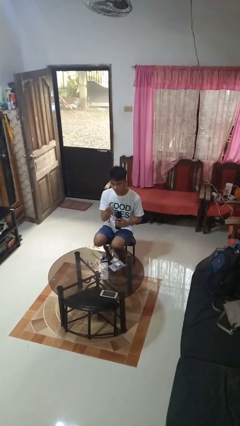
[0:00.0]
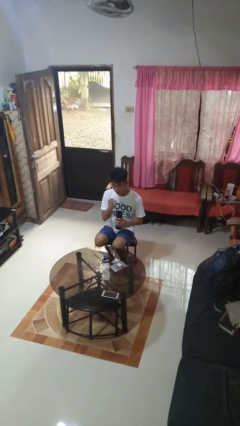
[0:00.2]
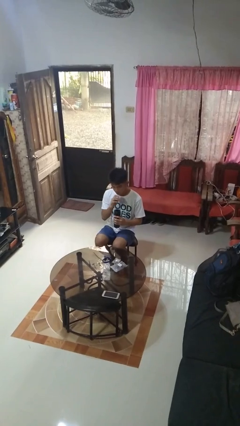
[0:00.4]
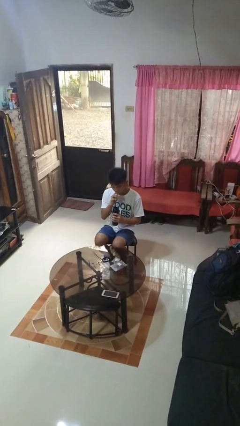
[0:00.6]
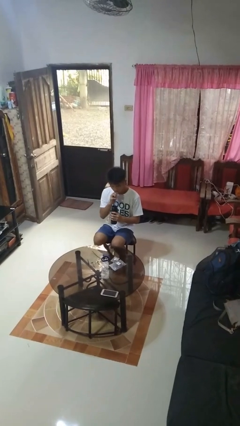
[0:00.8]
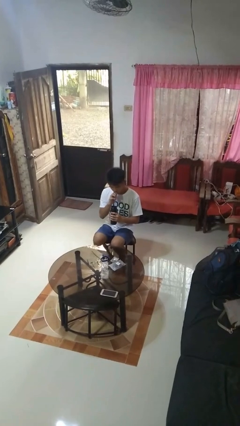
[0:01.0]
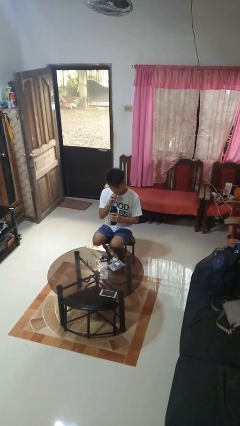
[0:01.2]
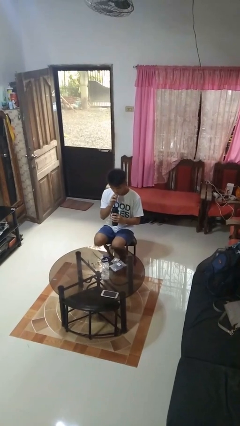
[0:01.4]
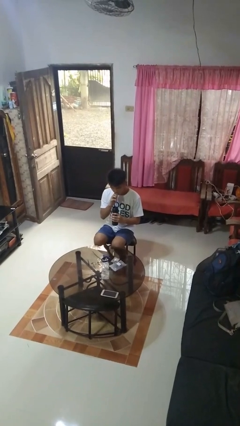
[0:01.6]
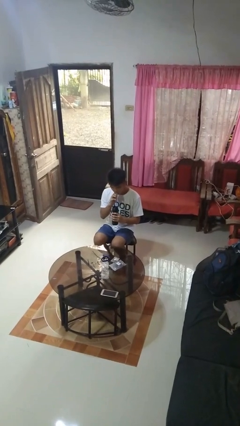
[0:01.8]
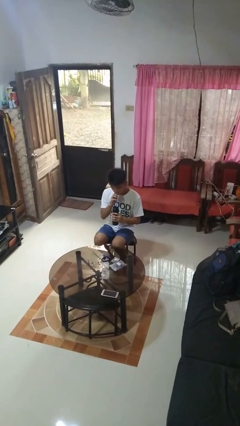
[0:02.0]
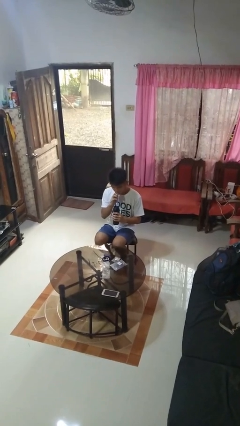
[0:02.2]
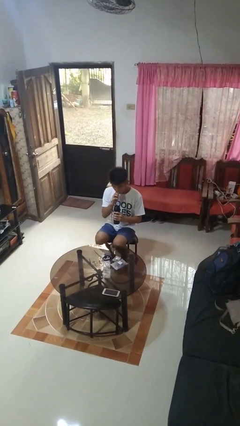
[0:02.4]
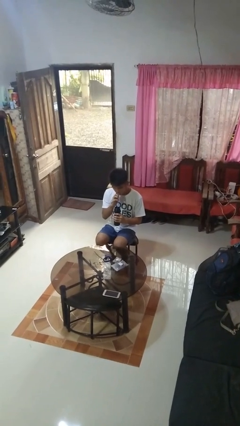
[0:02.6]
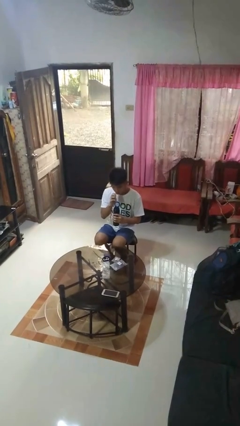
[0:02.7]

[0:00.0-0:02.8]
person drinks from straw

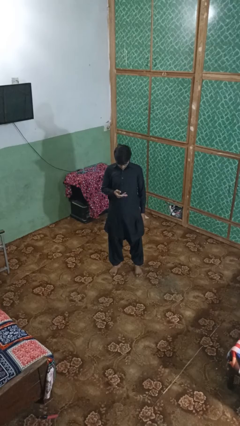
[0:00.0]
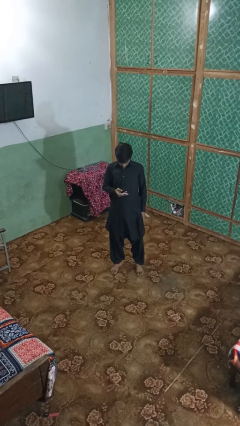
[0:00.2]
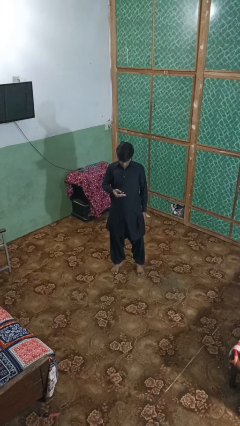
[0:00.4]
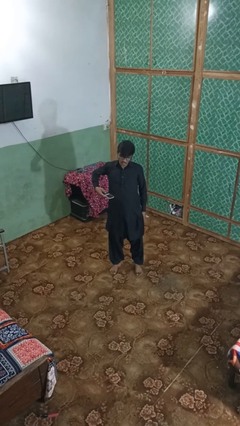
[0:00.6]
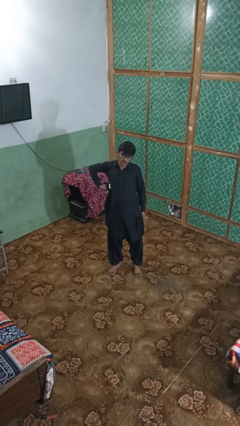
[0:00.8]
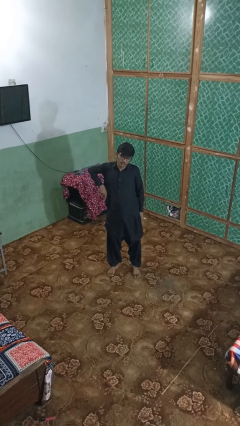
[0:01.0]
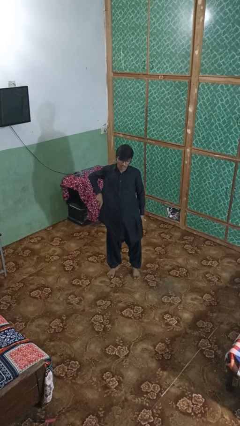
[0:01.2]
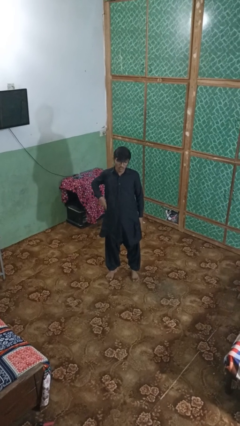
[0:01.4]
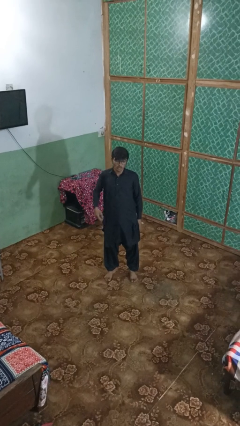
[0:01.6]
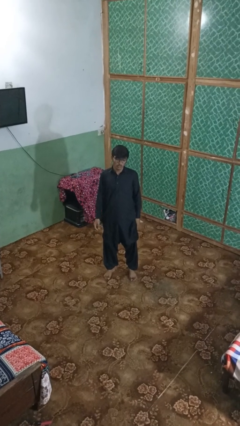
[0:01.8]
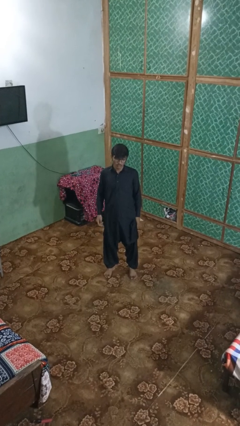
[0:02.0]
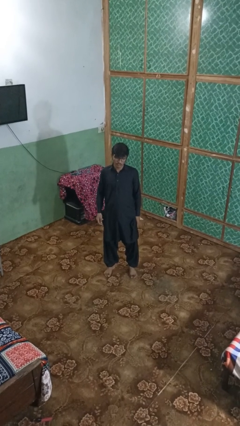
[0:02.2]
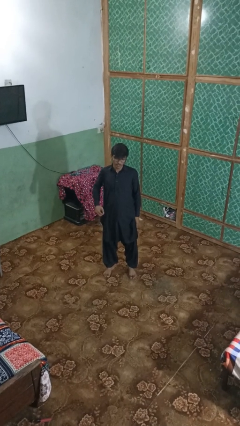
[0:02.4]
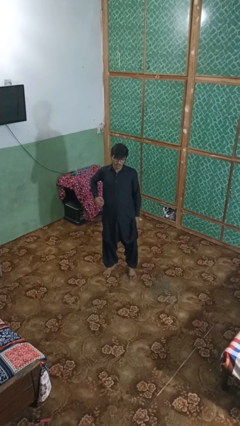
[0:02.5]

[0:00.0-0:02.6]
person puts phone into pocket

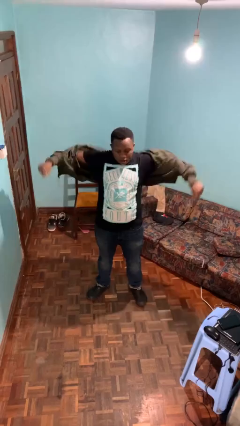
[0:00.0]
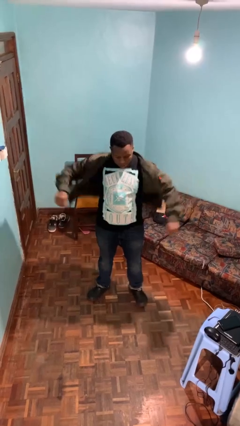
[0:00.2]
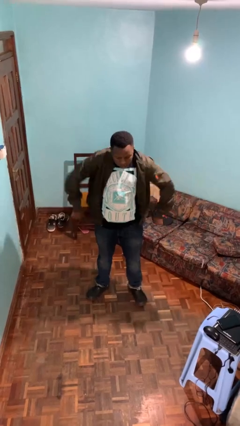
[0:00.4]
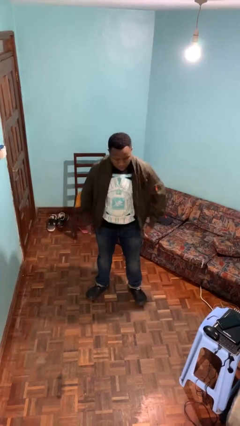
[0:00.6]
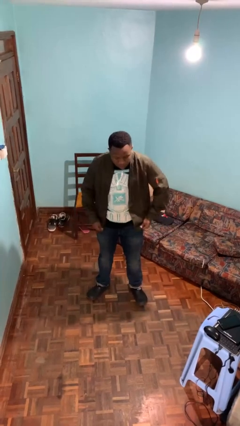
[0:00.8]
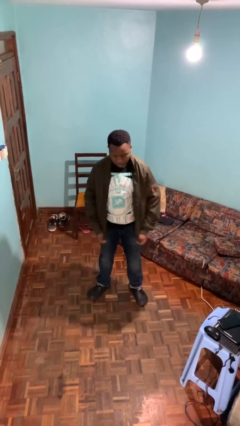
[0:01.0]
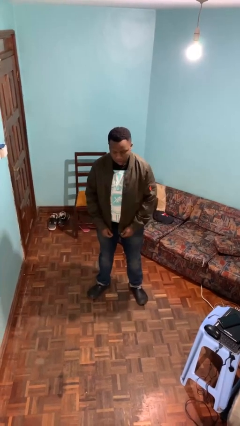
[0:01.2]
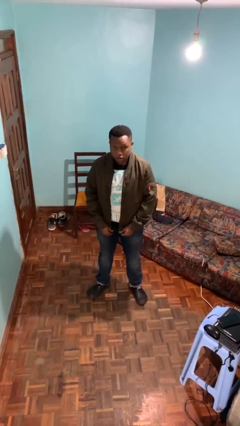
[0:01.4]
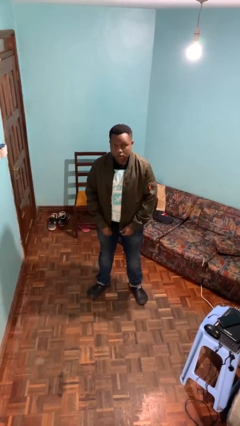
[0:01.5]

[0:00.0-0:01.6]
person puts on jacket

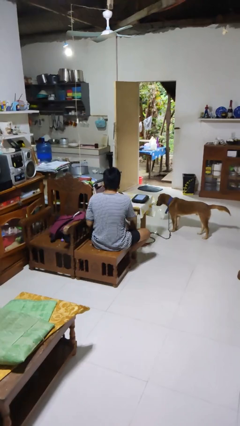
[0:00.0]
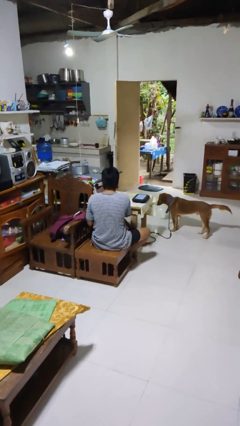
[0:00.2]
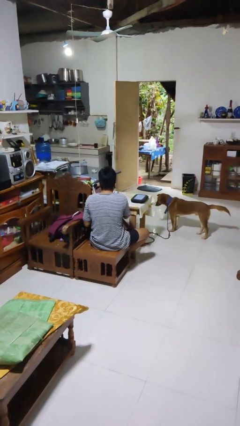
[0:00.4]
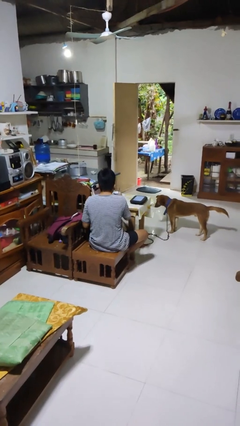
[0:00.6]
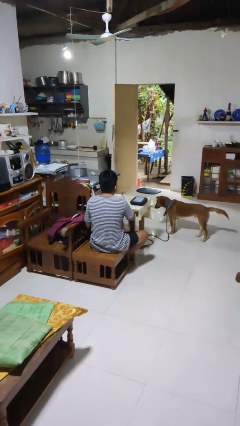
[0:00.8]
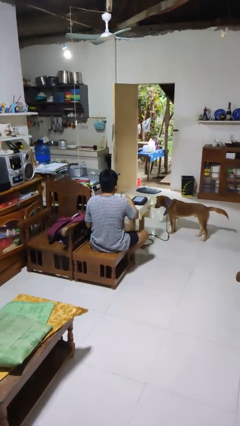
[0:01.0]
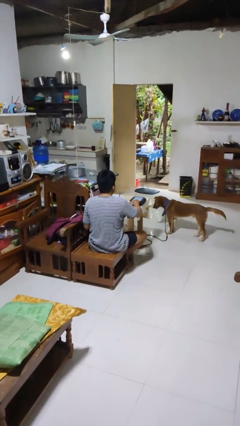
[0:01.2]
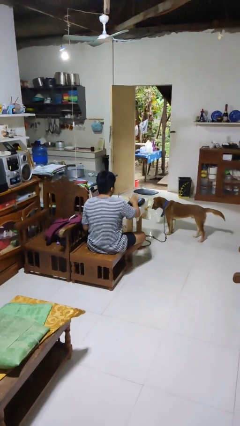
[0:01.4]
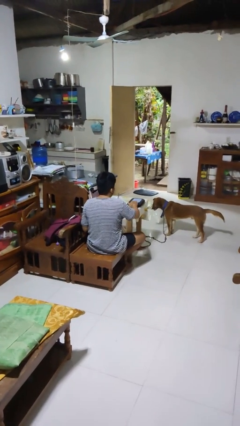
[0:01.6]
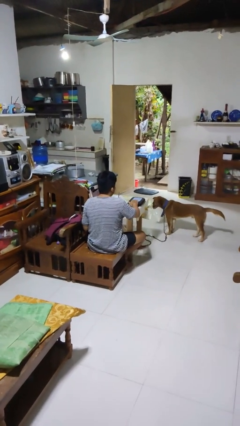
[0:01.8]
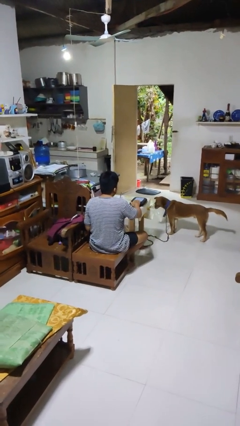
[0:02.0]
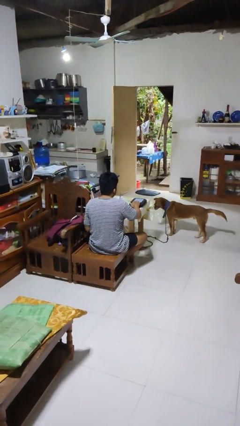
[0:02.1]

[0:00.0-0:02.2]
person taps object with finger

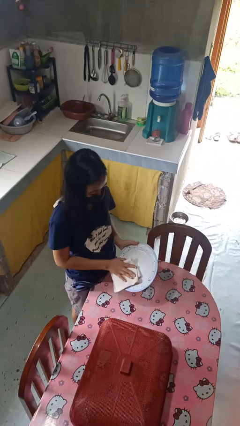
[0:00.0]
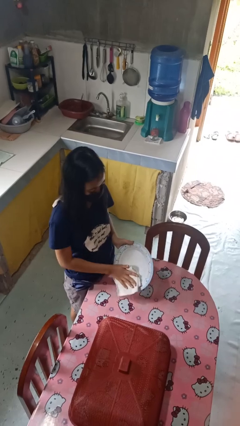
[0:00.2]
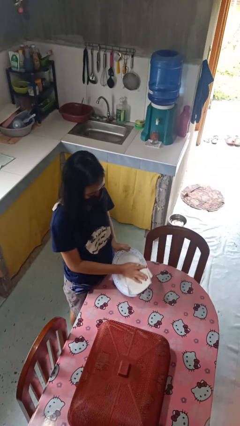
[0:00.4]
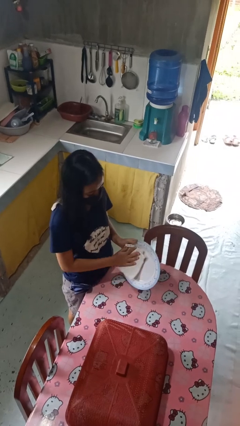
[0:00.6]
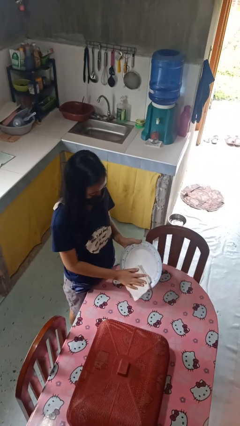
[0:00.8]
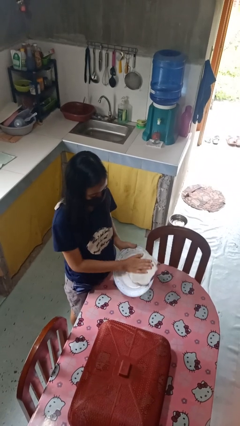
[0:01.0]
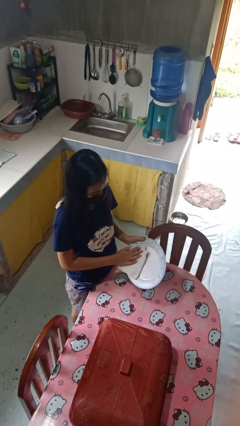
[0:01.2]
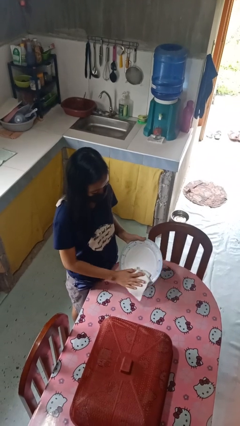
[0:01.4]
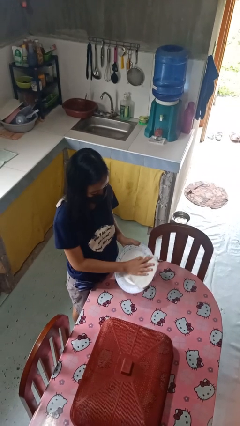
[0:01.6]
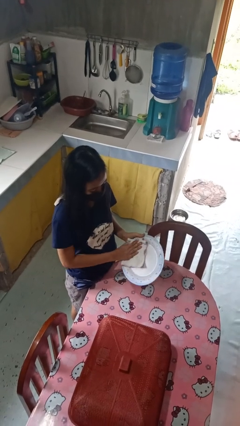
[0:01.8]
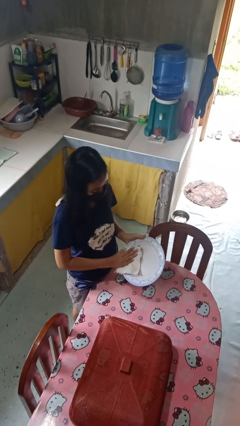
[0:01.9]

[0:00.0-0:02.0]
person dries dish

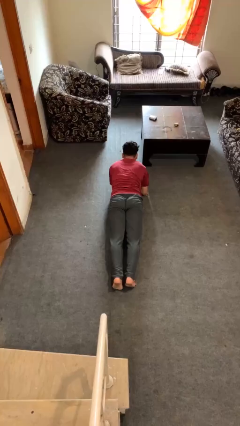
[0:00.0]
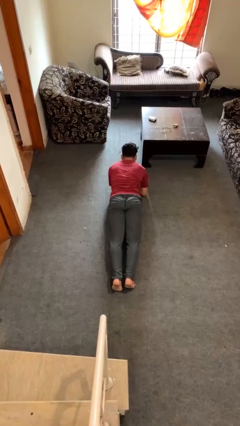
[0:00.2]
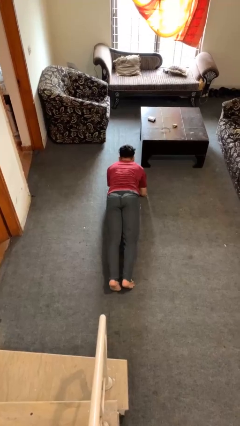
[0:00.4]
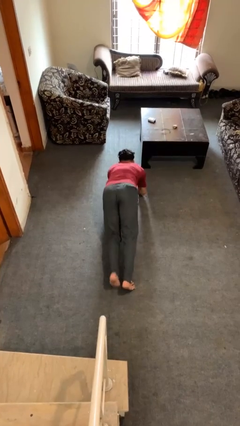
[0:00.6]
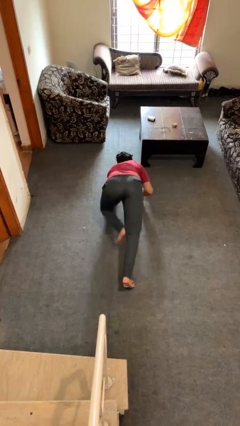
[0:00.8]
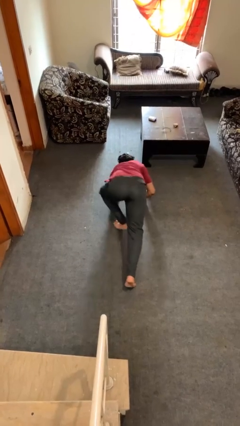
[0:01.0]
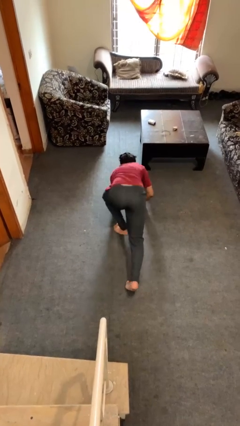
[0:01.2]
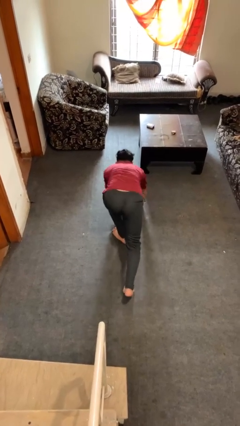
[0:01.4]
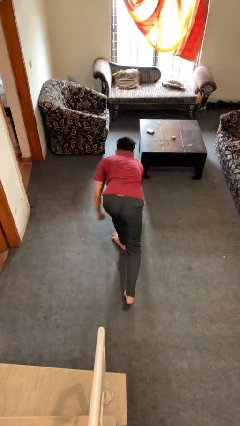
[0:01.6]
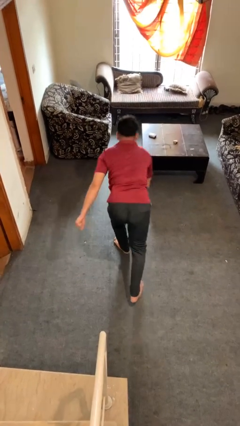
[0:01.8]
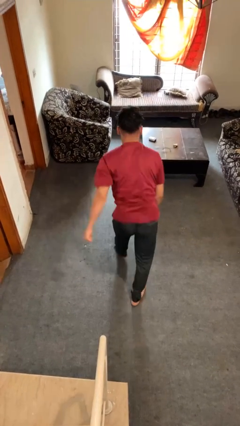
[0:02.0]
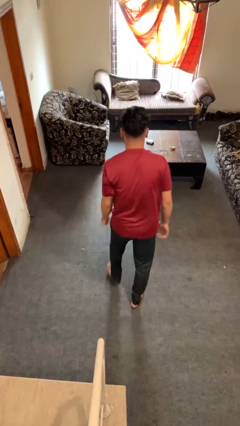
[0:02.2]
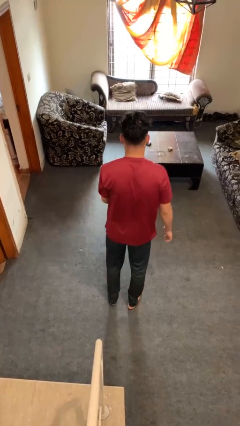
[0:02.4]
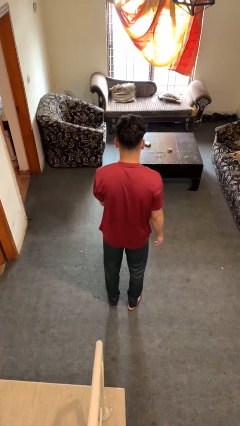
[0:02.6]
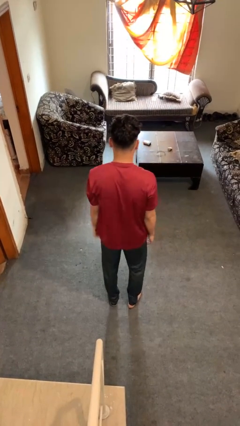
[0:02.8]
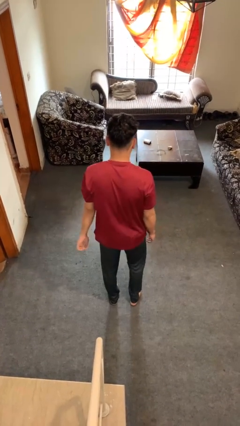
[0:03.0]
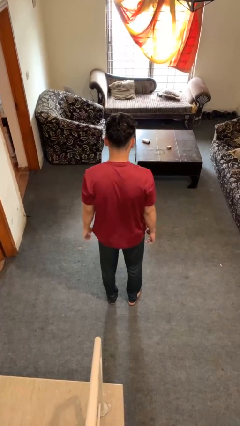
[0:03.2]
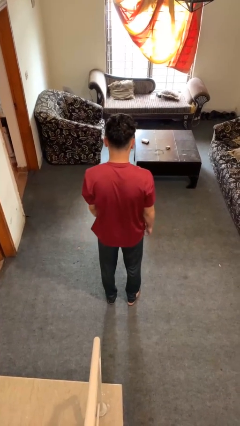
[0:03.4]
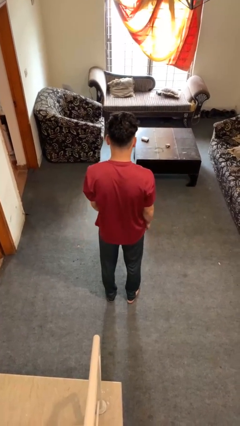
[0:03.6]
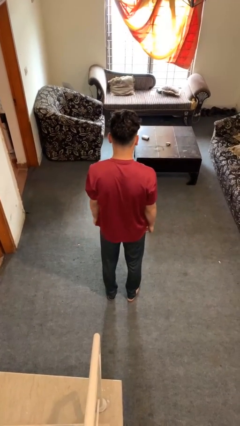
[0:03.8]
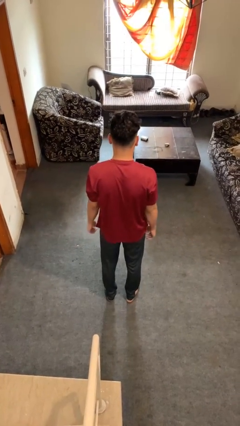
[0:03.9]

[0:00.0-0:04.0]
person stands up from floor

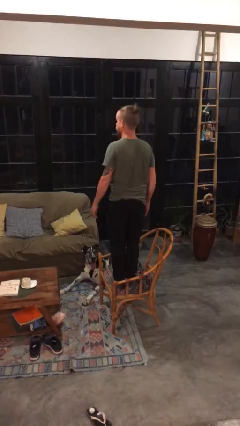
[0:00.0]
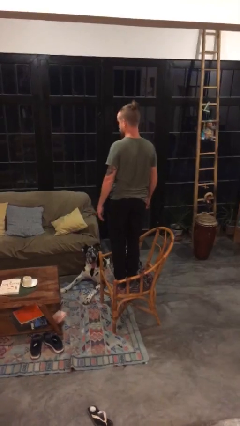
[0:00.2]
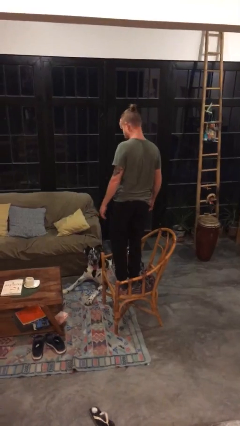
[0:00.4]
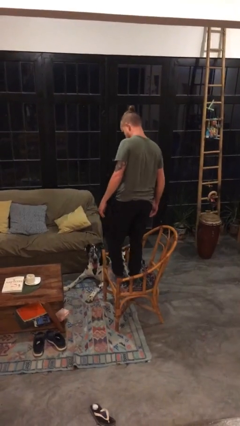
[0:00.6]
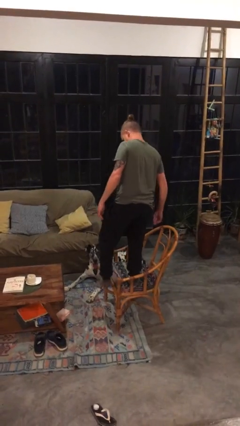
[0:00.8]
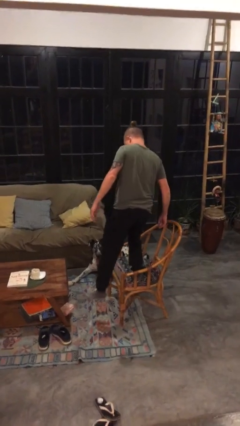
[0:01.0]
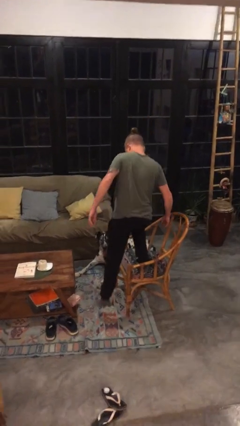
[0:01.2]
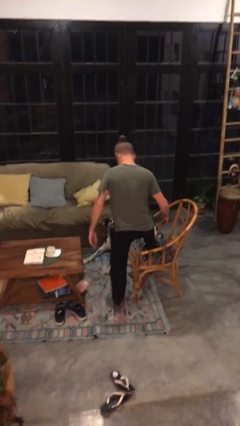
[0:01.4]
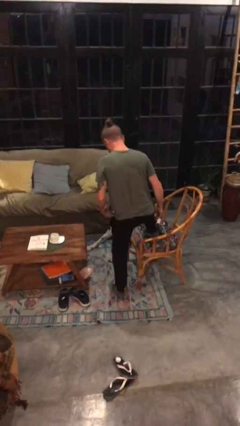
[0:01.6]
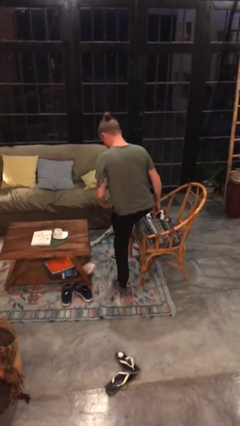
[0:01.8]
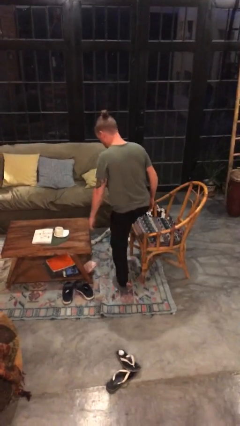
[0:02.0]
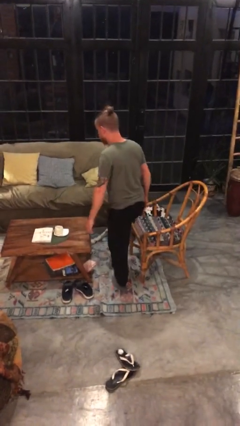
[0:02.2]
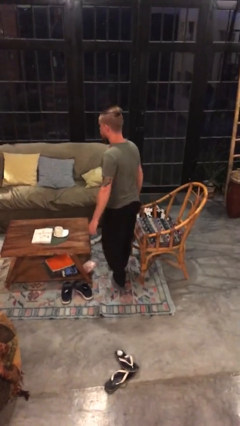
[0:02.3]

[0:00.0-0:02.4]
person climbs off chair
